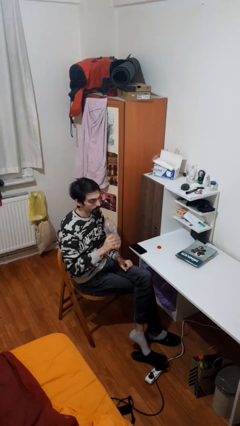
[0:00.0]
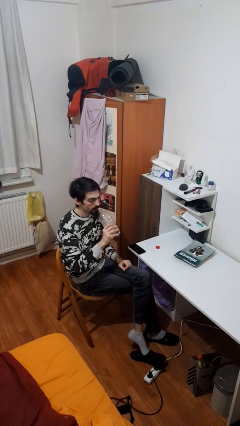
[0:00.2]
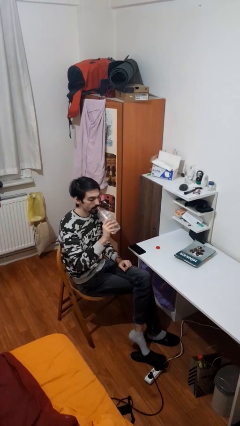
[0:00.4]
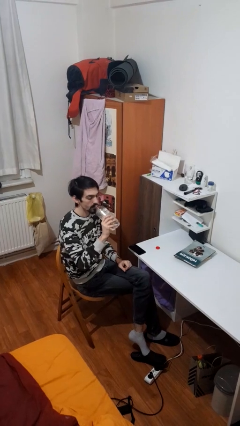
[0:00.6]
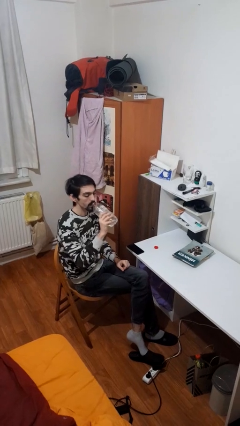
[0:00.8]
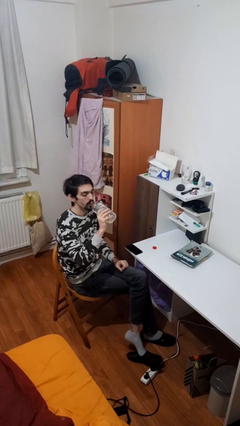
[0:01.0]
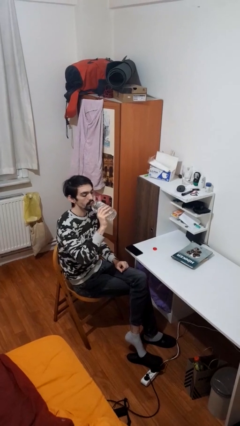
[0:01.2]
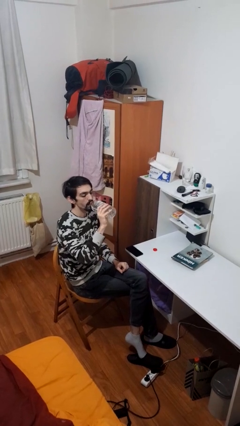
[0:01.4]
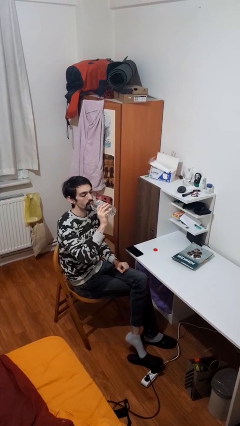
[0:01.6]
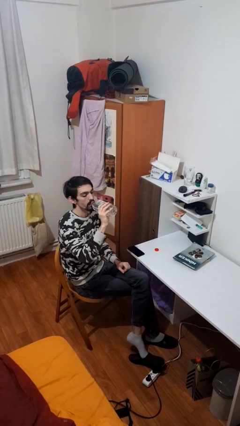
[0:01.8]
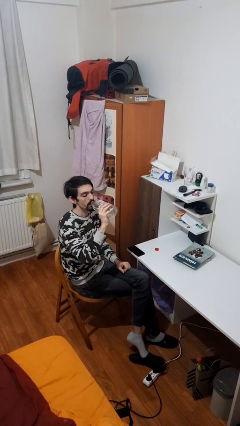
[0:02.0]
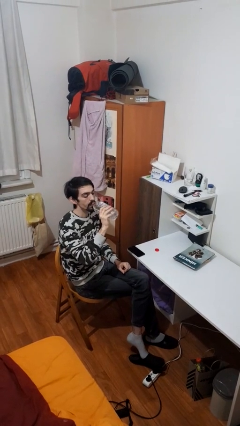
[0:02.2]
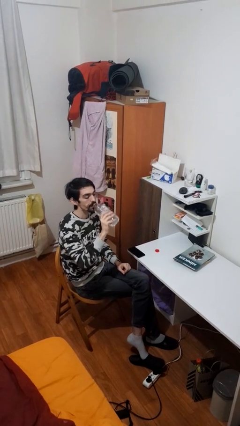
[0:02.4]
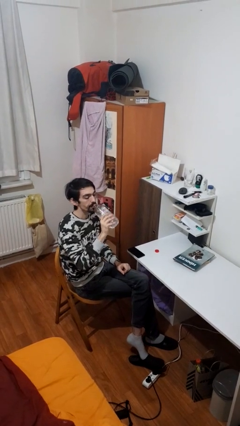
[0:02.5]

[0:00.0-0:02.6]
person drinks from bottle

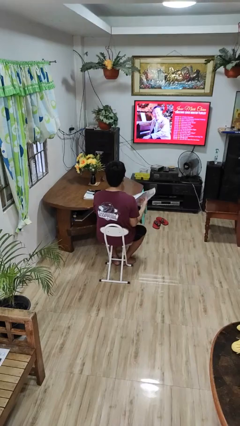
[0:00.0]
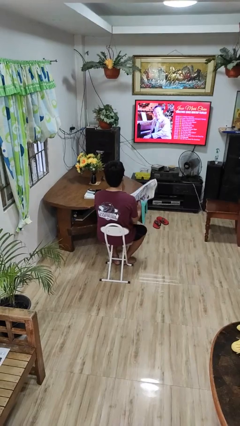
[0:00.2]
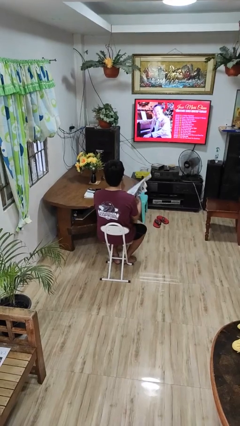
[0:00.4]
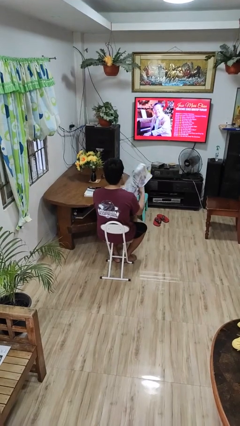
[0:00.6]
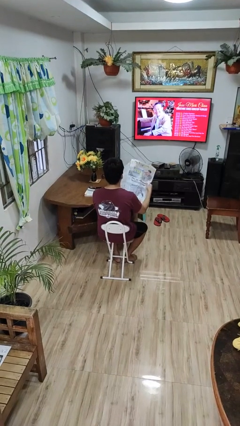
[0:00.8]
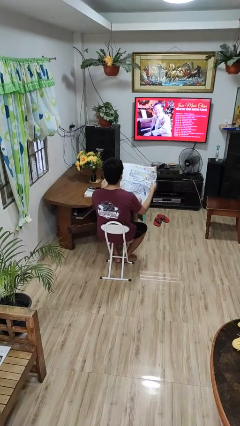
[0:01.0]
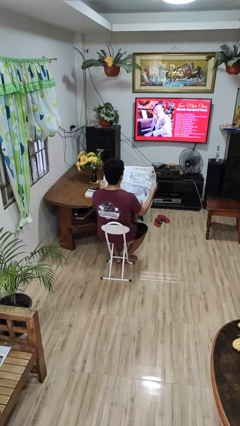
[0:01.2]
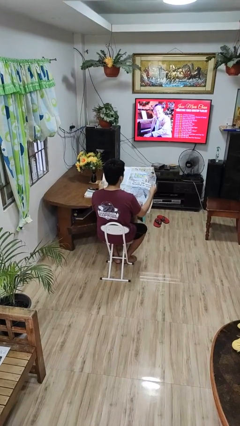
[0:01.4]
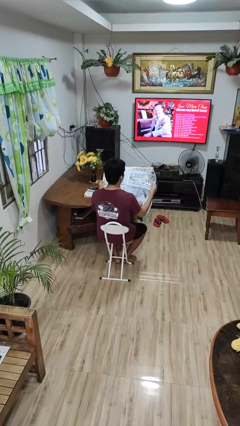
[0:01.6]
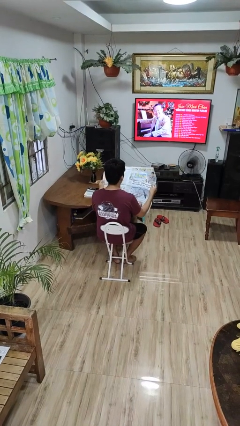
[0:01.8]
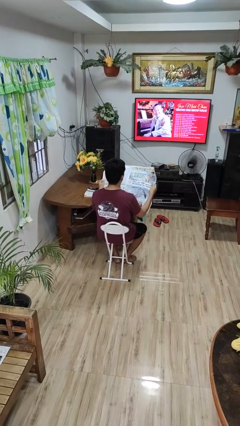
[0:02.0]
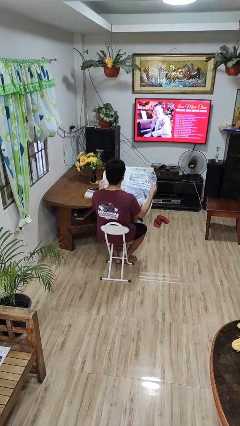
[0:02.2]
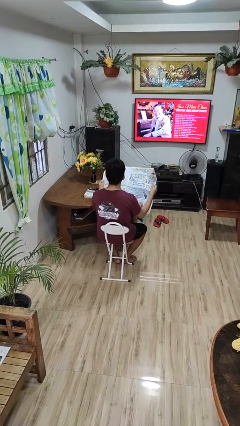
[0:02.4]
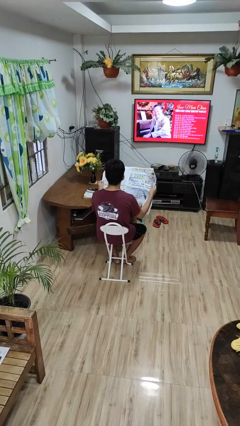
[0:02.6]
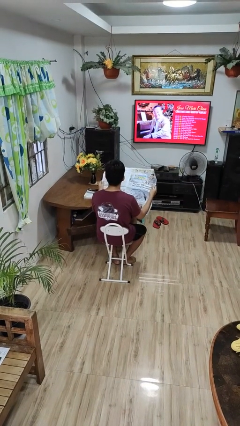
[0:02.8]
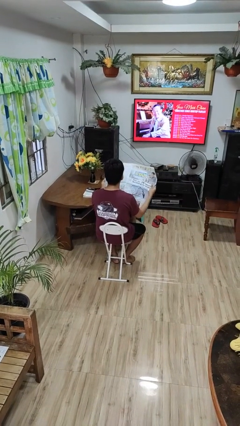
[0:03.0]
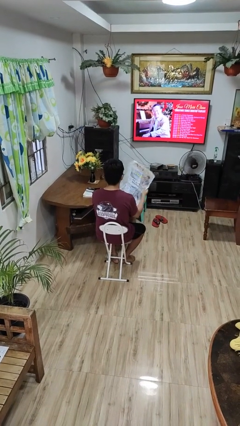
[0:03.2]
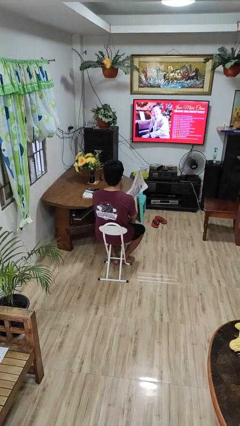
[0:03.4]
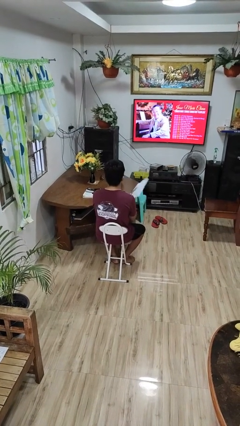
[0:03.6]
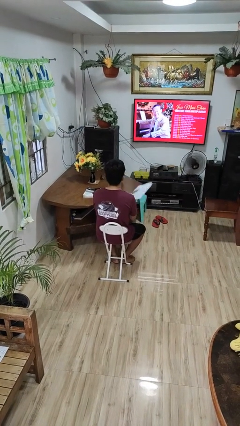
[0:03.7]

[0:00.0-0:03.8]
person reads newspaper

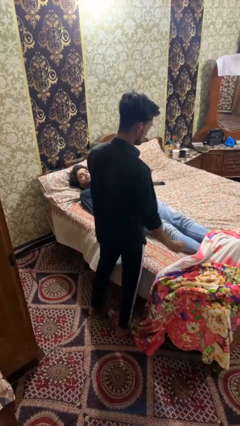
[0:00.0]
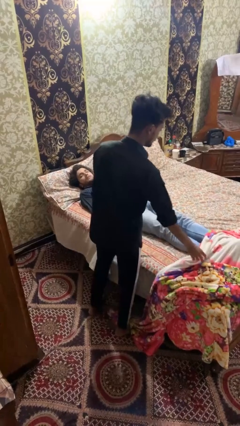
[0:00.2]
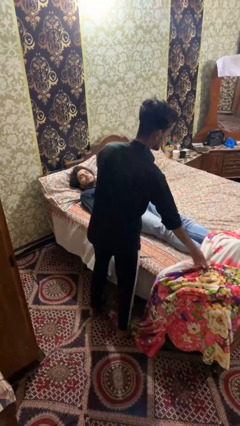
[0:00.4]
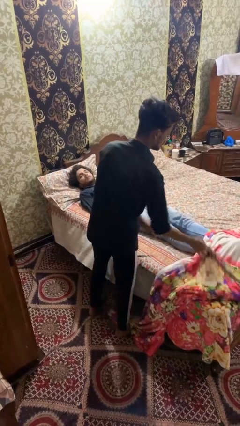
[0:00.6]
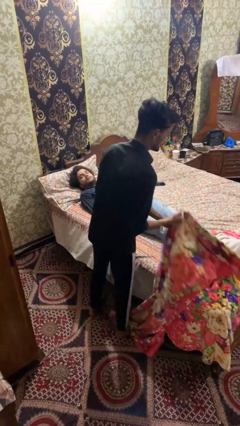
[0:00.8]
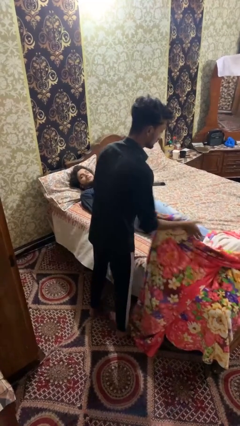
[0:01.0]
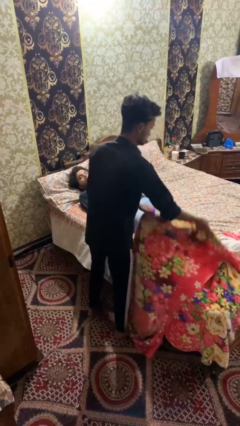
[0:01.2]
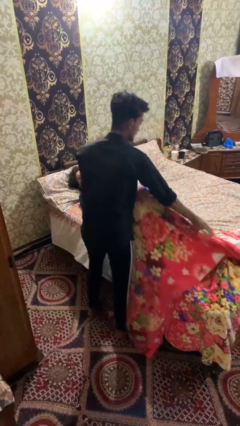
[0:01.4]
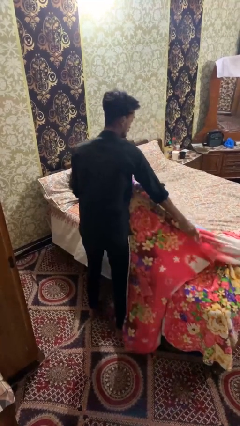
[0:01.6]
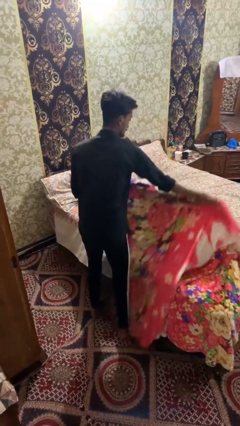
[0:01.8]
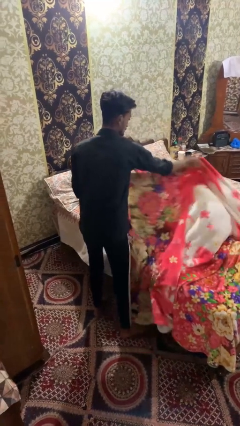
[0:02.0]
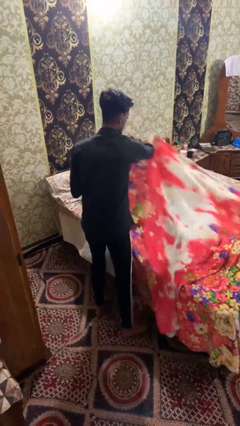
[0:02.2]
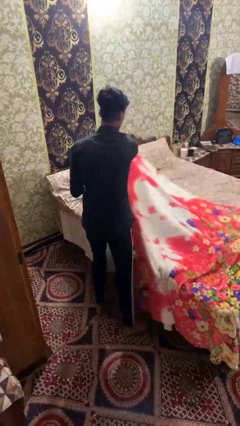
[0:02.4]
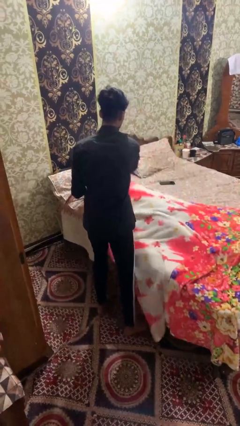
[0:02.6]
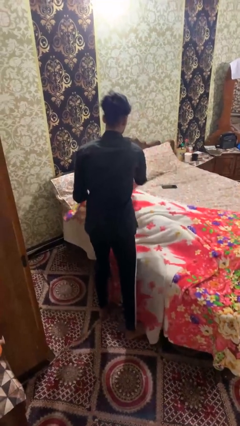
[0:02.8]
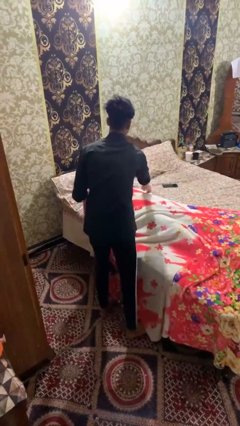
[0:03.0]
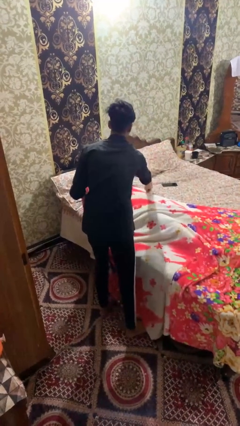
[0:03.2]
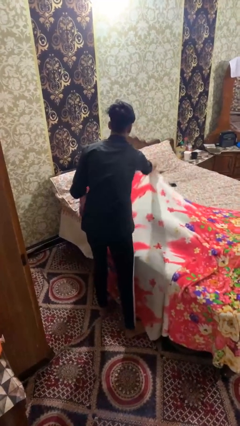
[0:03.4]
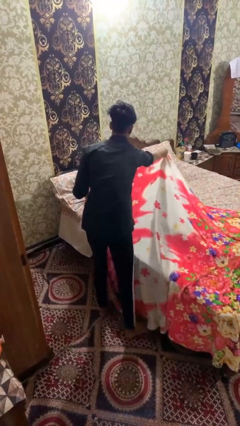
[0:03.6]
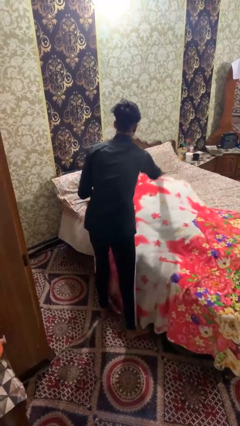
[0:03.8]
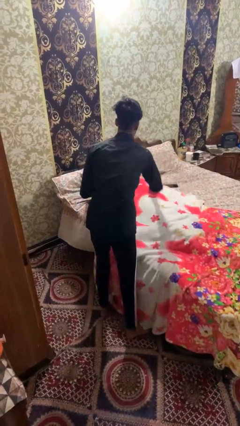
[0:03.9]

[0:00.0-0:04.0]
person covers friend with blanket

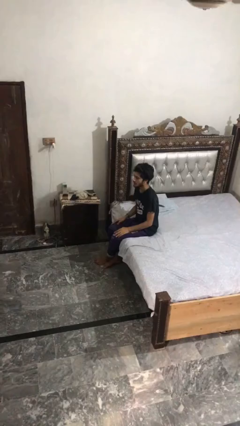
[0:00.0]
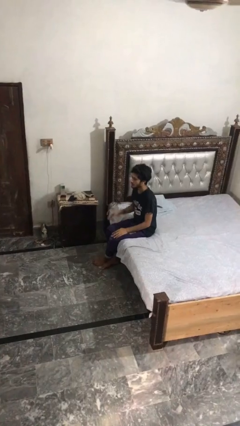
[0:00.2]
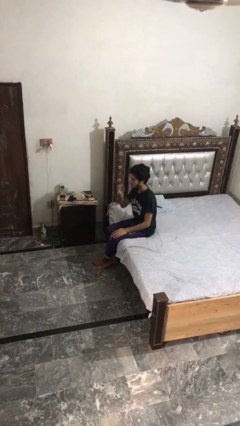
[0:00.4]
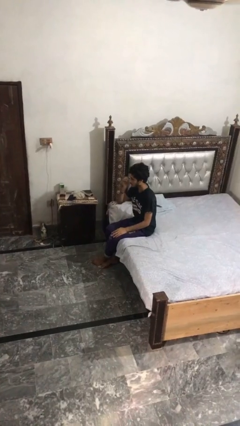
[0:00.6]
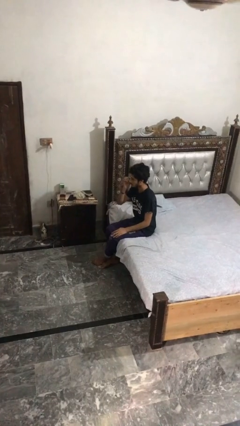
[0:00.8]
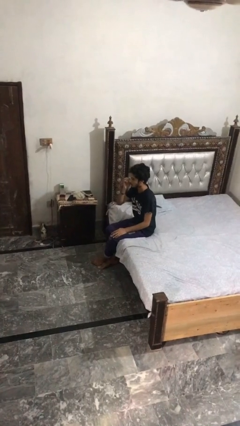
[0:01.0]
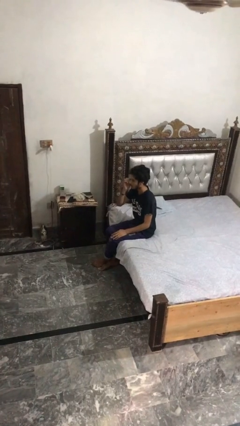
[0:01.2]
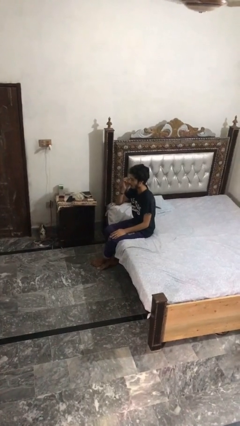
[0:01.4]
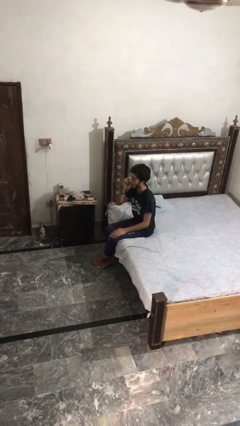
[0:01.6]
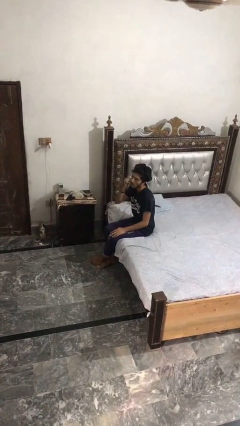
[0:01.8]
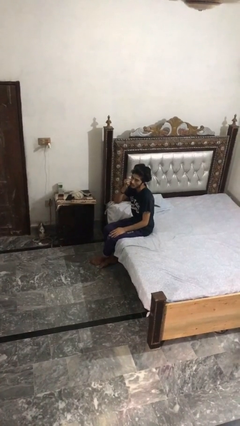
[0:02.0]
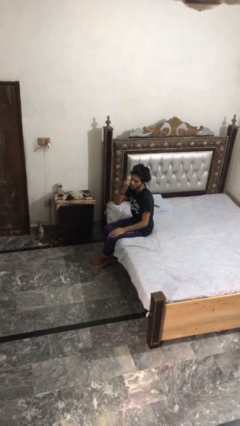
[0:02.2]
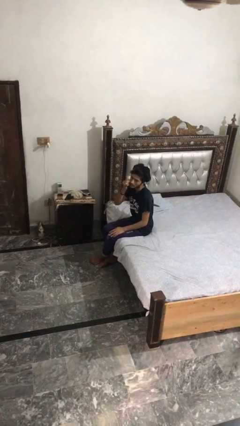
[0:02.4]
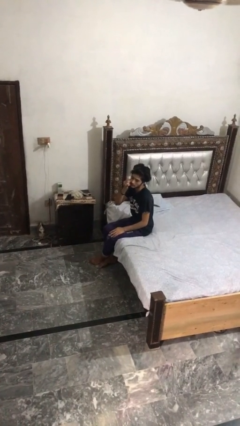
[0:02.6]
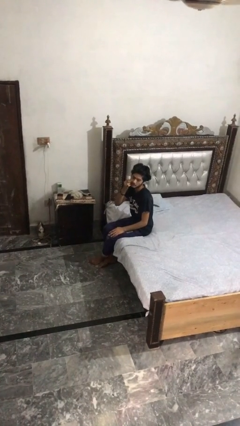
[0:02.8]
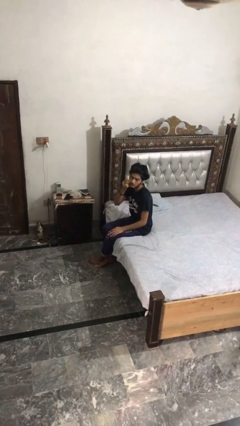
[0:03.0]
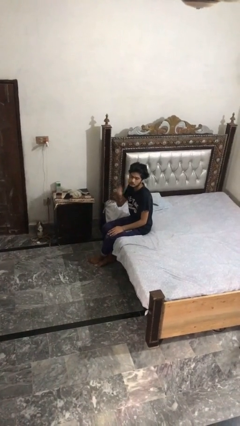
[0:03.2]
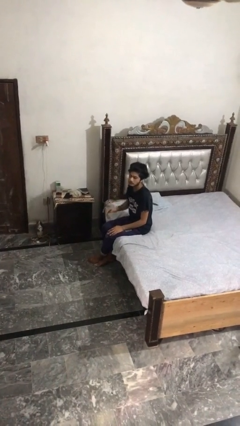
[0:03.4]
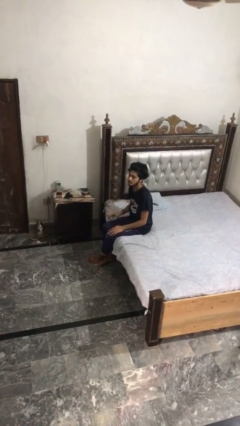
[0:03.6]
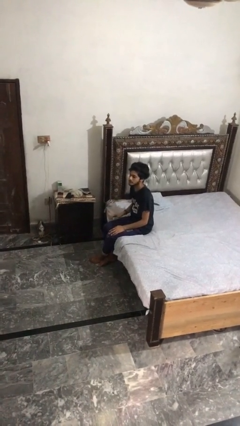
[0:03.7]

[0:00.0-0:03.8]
person scratches face

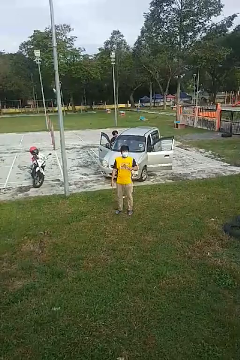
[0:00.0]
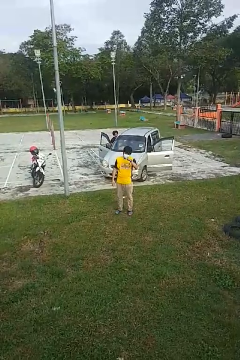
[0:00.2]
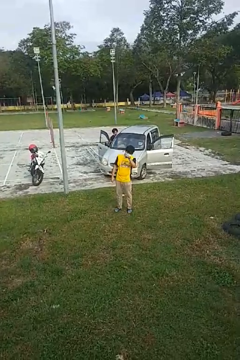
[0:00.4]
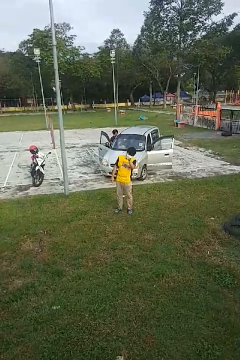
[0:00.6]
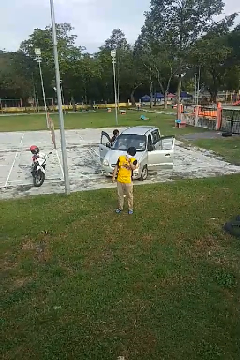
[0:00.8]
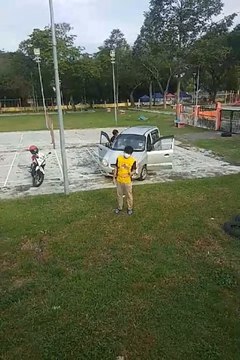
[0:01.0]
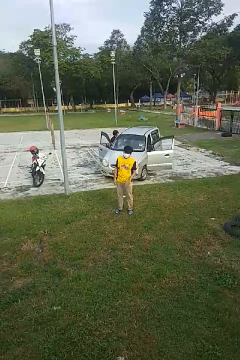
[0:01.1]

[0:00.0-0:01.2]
person points at person

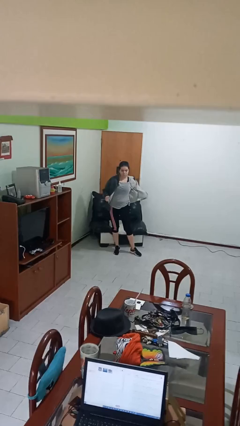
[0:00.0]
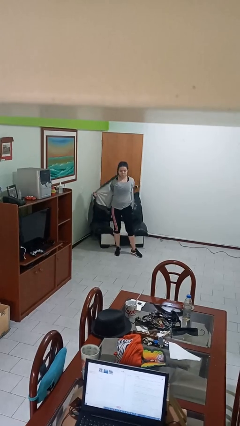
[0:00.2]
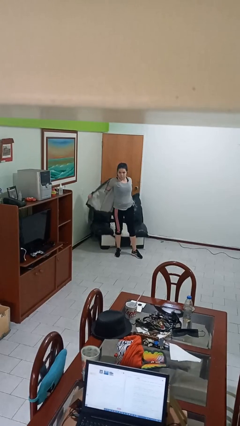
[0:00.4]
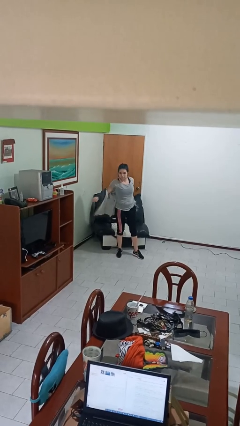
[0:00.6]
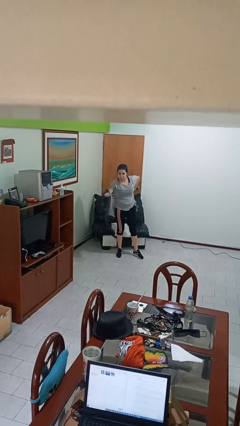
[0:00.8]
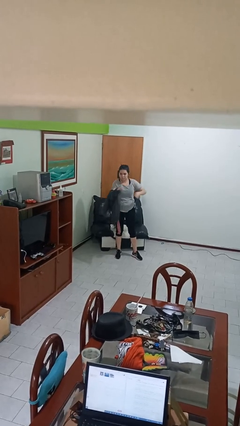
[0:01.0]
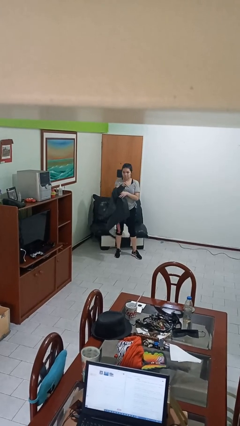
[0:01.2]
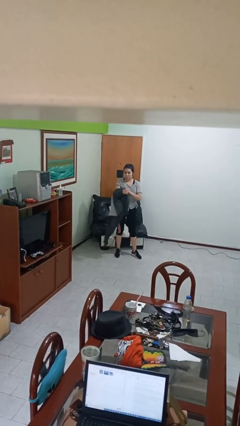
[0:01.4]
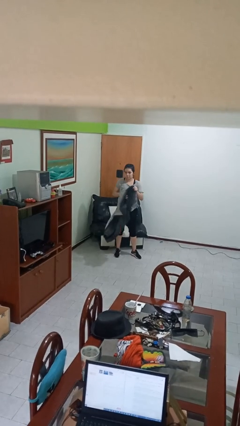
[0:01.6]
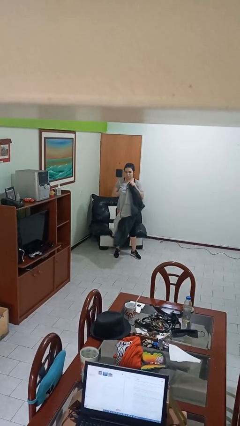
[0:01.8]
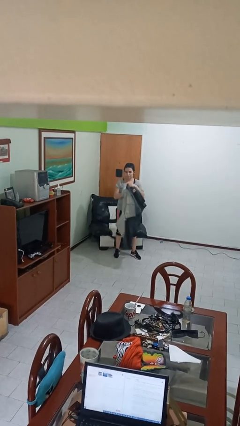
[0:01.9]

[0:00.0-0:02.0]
person takes off jacket
